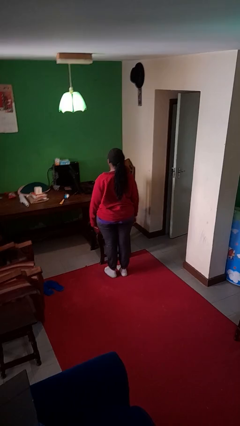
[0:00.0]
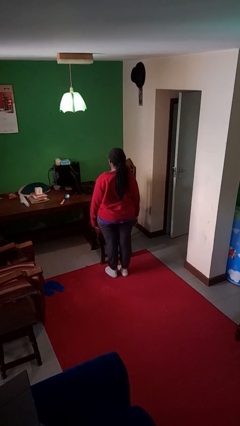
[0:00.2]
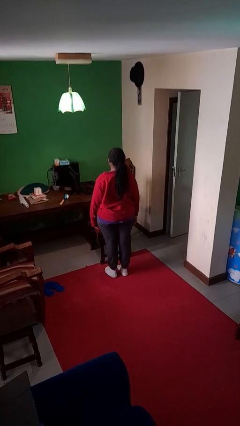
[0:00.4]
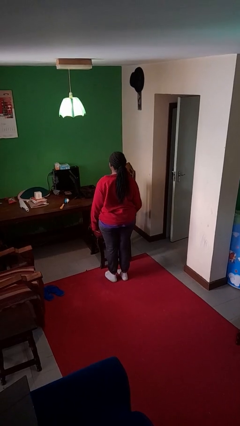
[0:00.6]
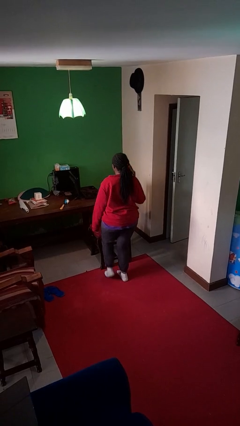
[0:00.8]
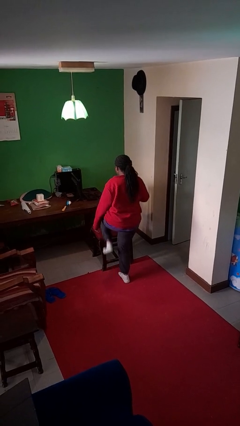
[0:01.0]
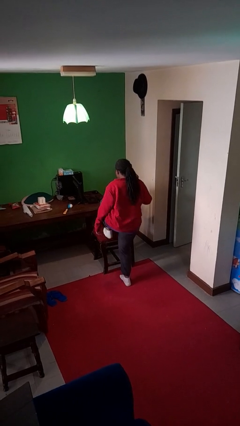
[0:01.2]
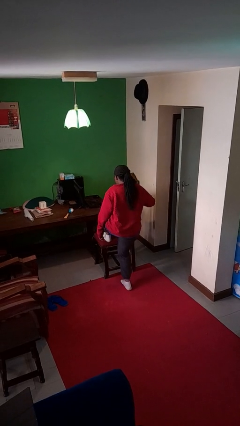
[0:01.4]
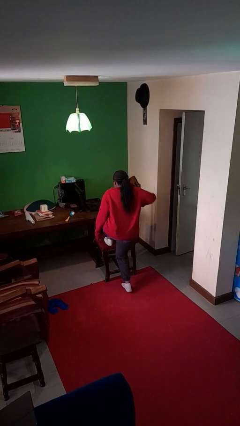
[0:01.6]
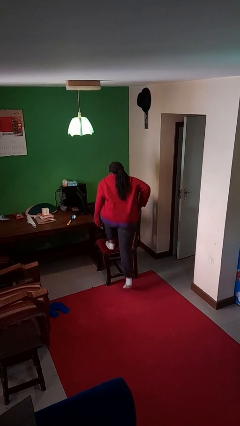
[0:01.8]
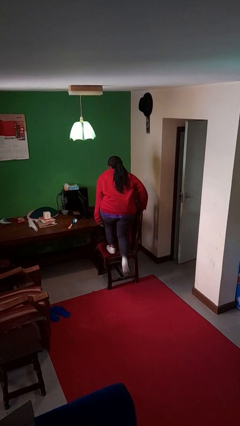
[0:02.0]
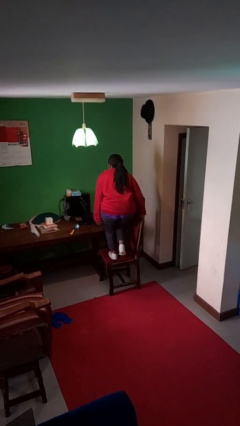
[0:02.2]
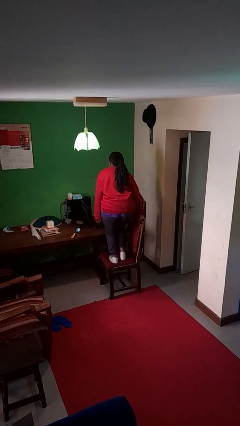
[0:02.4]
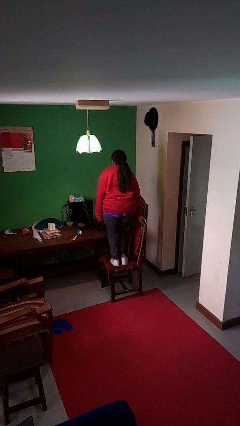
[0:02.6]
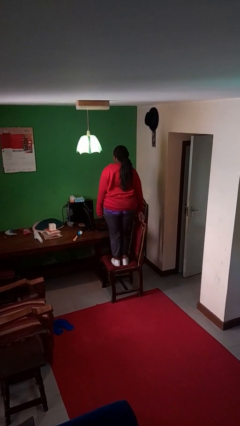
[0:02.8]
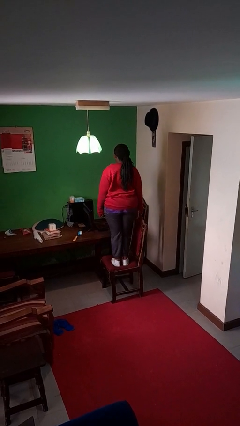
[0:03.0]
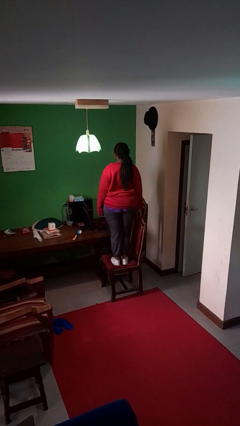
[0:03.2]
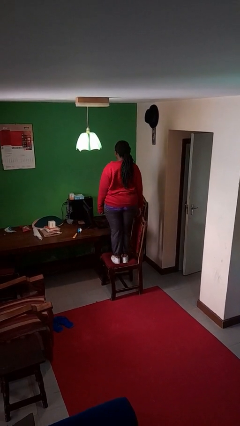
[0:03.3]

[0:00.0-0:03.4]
person climbs on chair

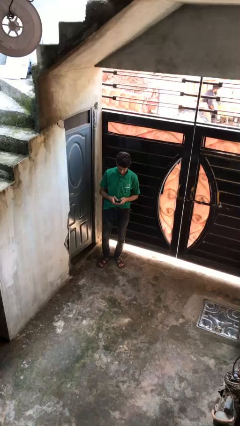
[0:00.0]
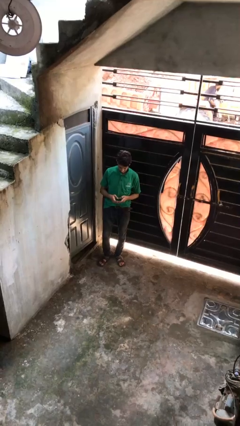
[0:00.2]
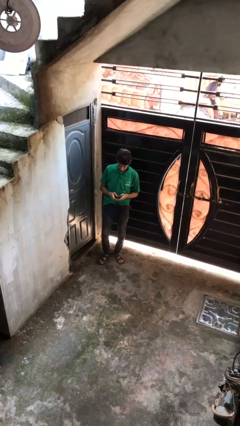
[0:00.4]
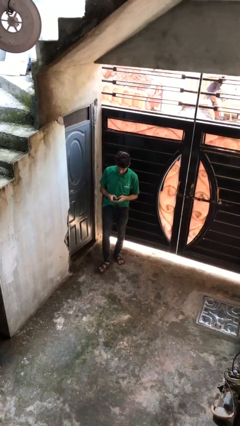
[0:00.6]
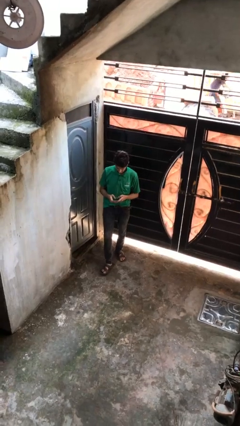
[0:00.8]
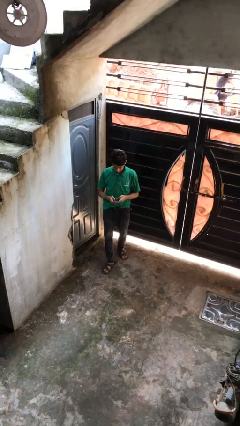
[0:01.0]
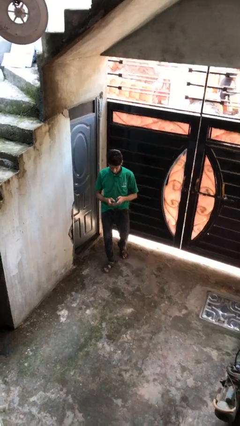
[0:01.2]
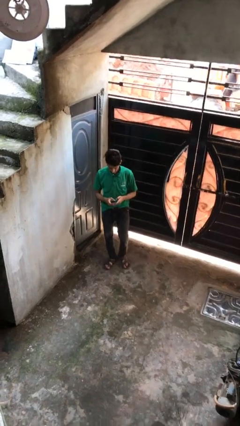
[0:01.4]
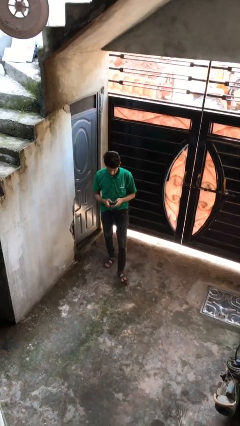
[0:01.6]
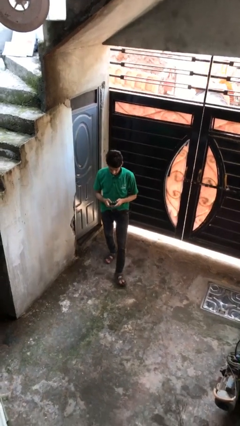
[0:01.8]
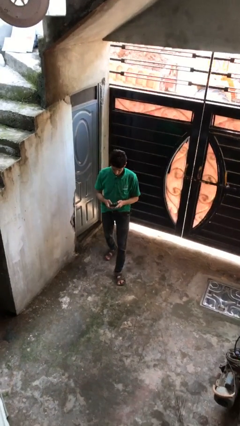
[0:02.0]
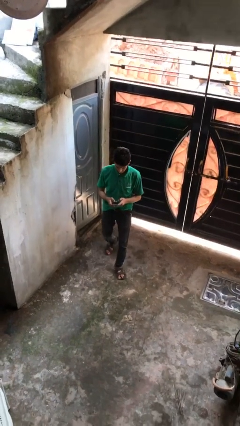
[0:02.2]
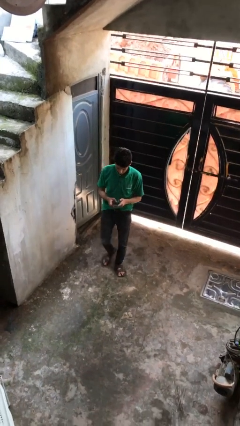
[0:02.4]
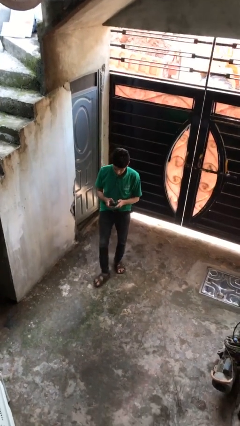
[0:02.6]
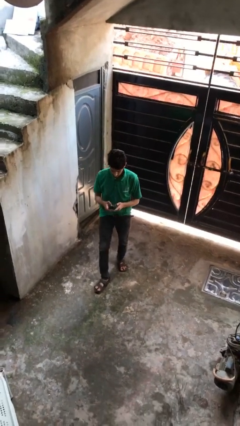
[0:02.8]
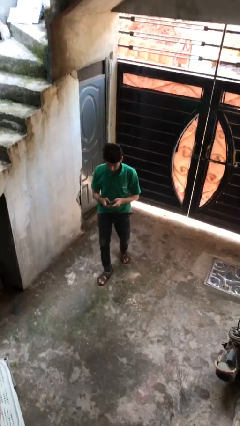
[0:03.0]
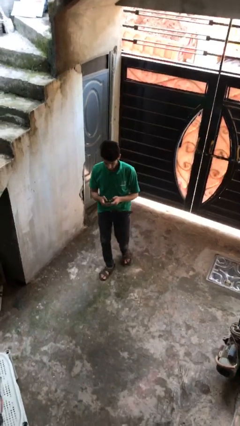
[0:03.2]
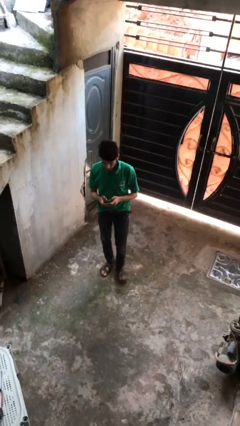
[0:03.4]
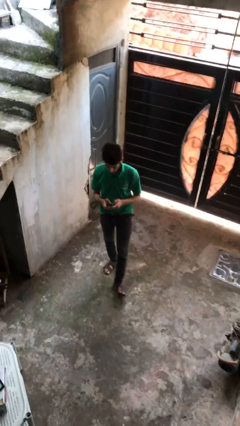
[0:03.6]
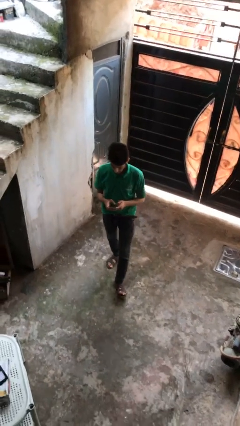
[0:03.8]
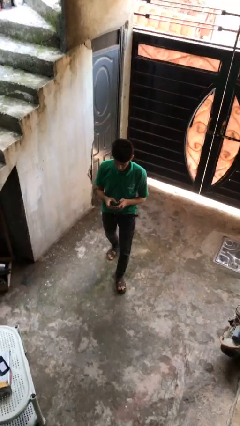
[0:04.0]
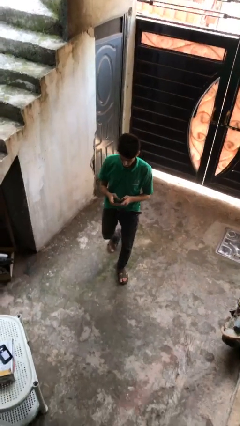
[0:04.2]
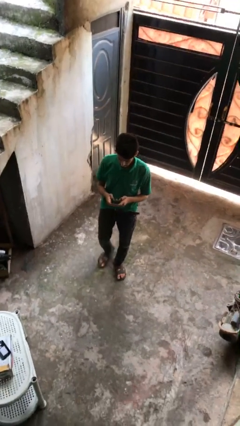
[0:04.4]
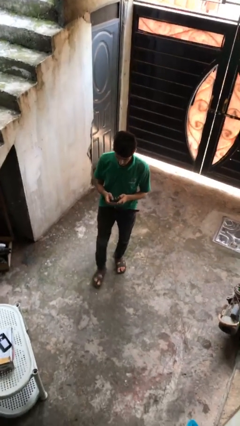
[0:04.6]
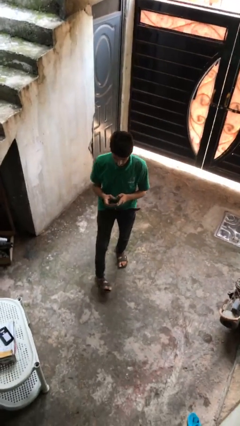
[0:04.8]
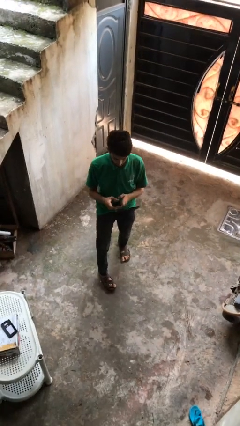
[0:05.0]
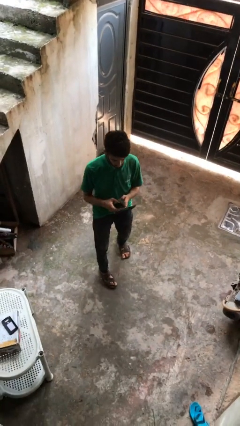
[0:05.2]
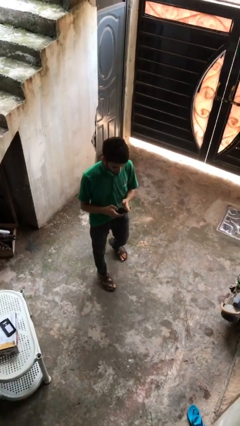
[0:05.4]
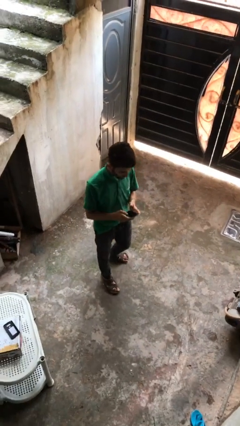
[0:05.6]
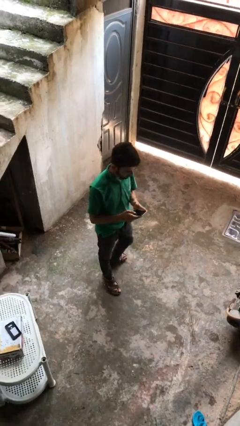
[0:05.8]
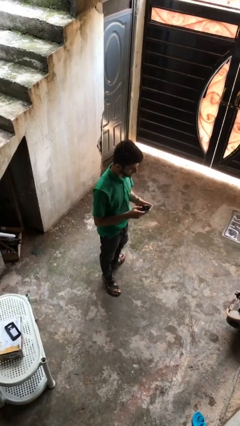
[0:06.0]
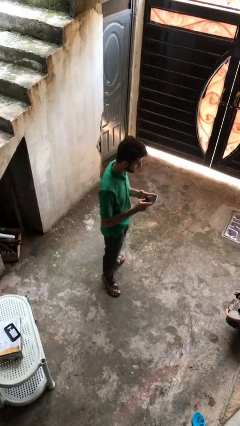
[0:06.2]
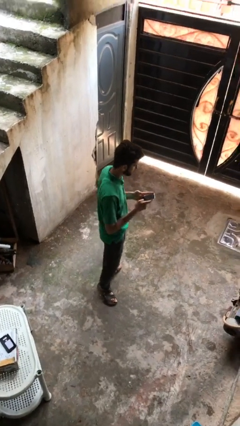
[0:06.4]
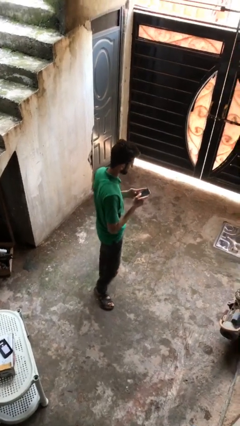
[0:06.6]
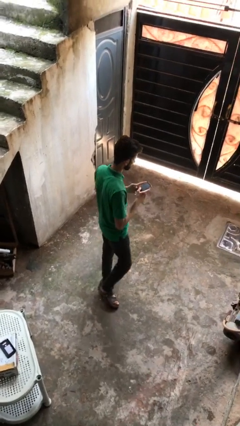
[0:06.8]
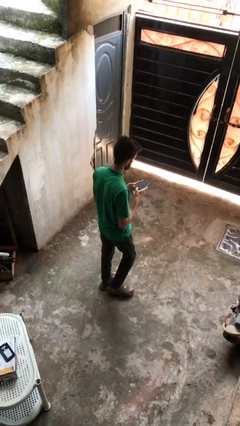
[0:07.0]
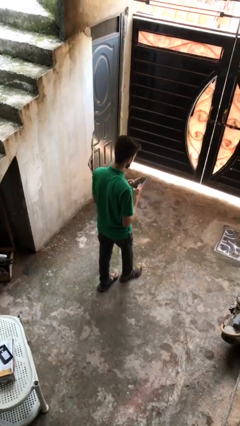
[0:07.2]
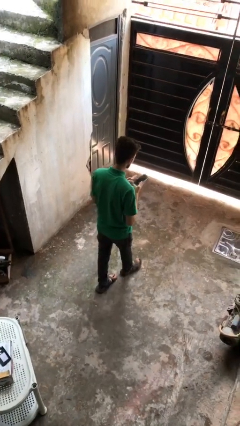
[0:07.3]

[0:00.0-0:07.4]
person texts on phone

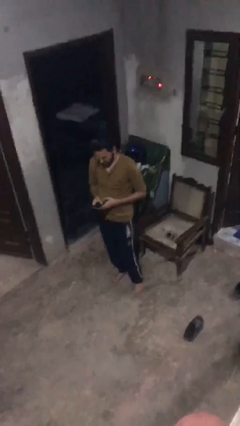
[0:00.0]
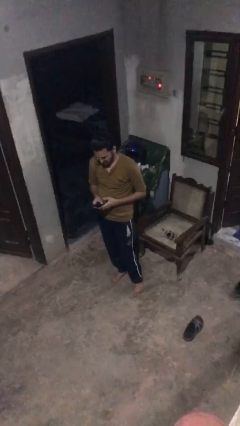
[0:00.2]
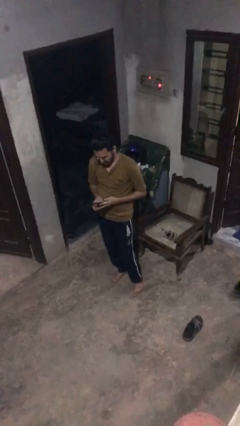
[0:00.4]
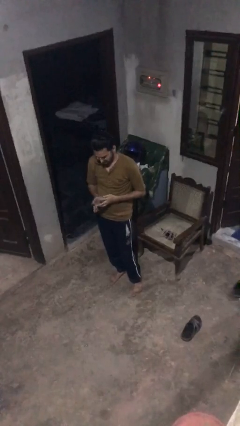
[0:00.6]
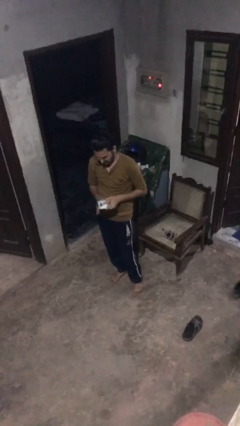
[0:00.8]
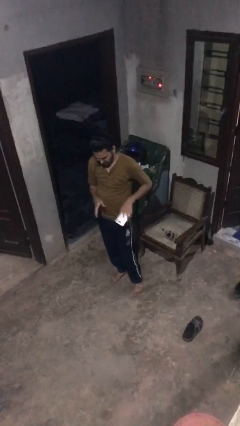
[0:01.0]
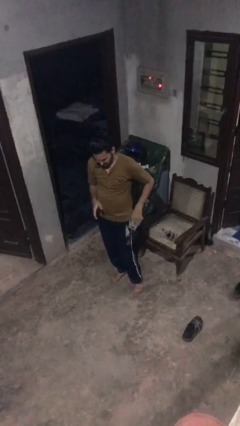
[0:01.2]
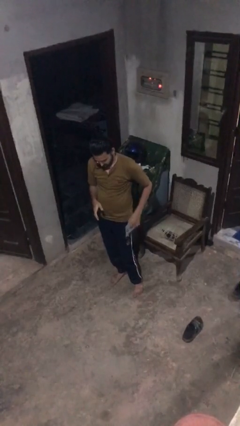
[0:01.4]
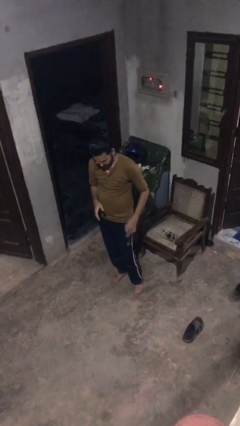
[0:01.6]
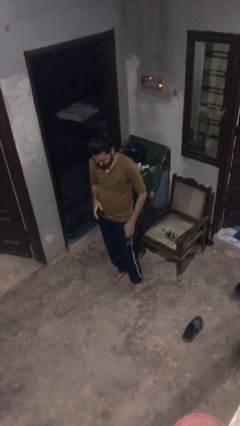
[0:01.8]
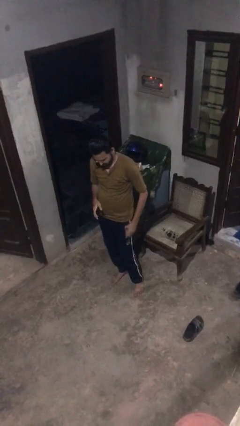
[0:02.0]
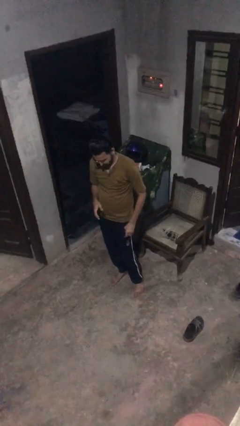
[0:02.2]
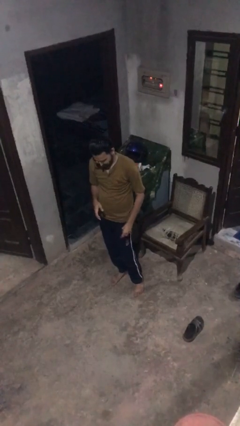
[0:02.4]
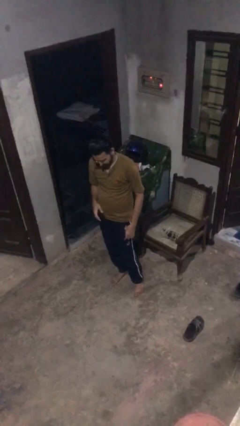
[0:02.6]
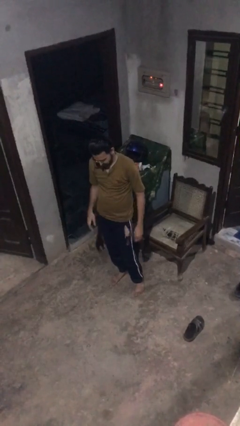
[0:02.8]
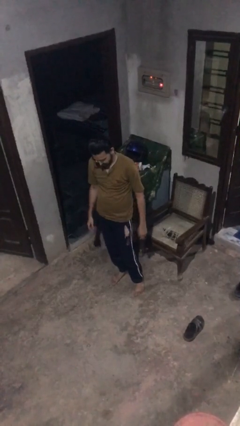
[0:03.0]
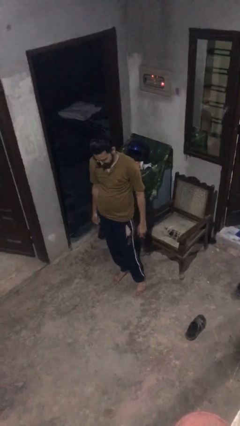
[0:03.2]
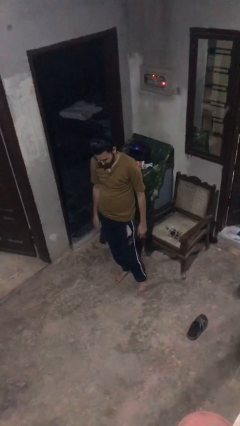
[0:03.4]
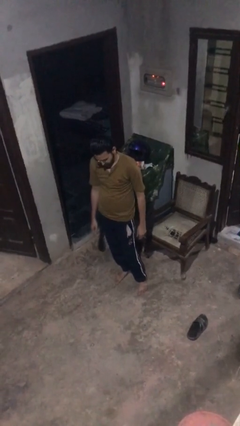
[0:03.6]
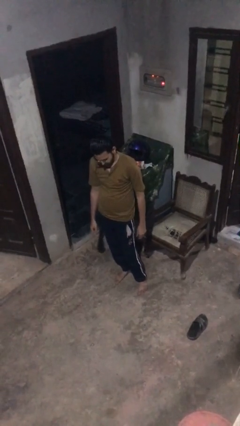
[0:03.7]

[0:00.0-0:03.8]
person puts phone into pocket

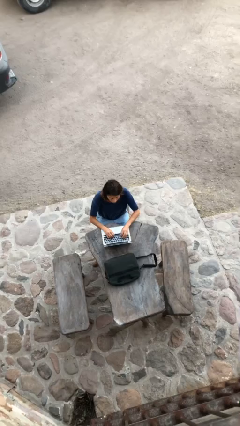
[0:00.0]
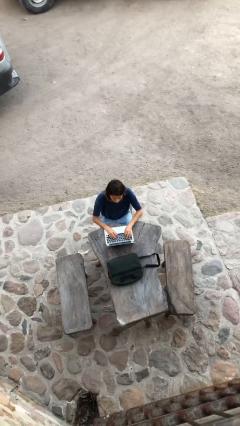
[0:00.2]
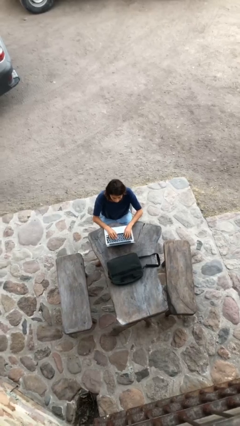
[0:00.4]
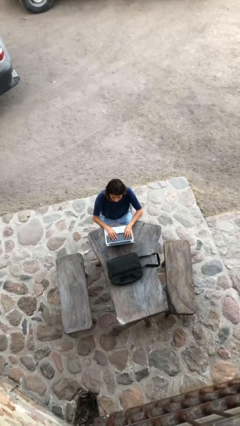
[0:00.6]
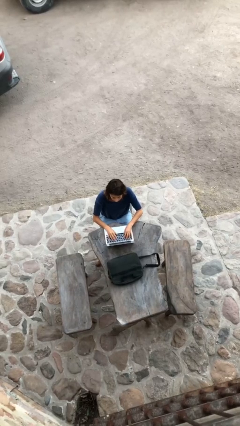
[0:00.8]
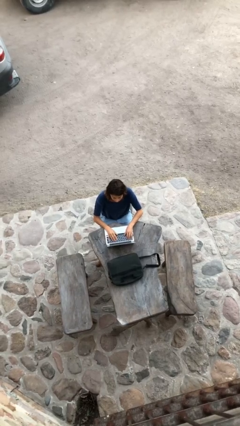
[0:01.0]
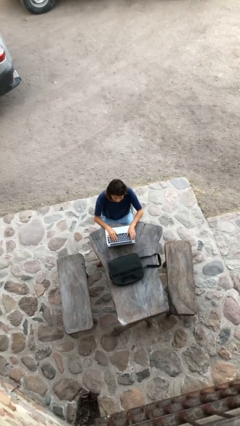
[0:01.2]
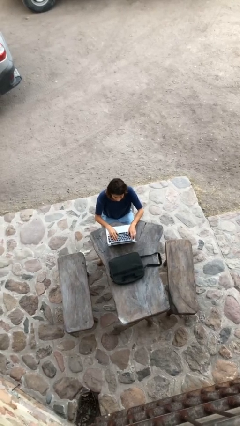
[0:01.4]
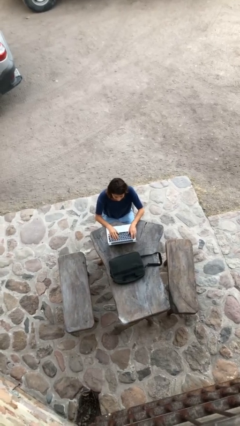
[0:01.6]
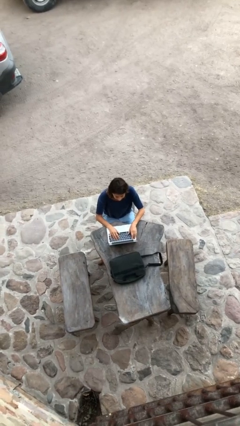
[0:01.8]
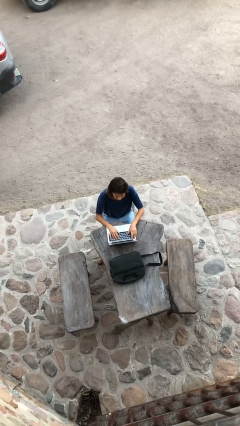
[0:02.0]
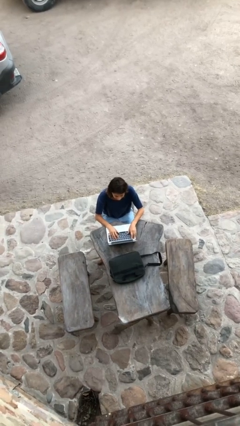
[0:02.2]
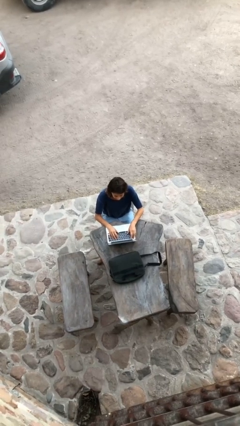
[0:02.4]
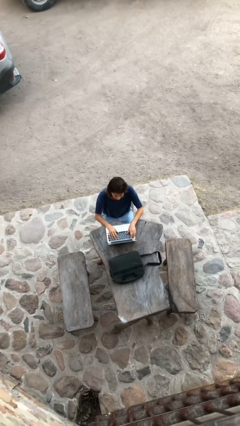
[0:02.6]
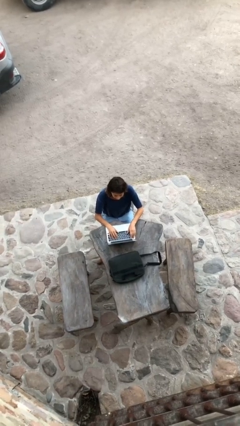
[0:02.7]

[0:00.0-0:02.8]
person interacts with laptop
